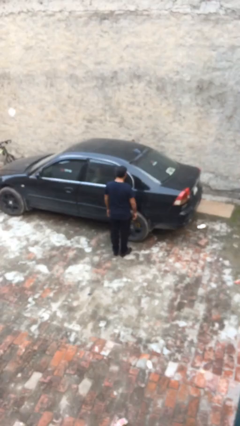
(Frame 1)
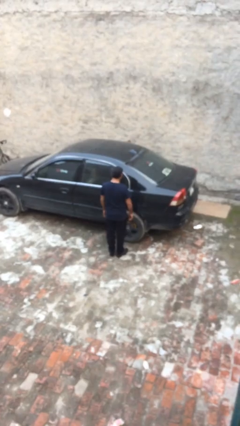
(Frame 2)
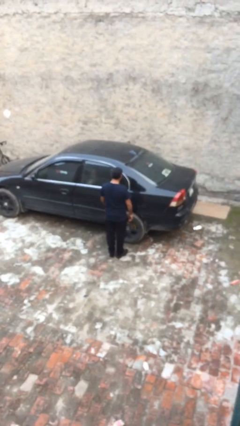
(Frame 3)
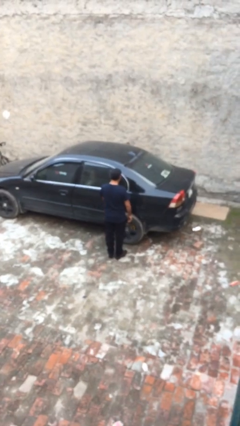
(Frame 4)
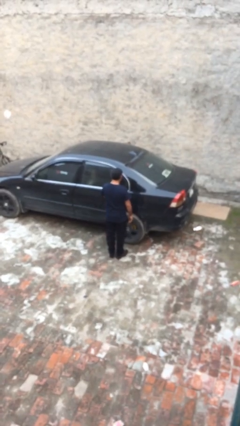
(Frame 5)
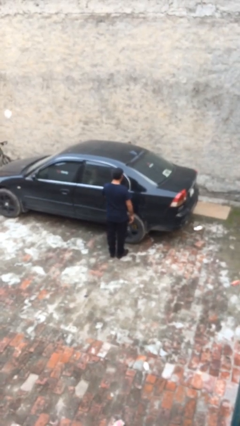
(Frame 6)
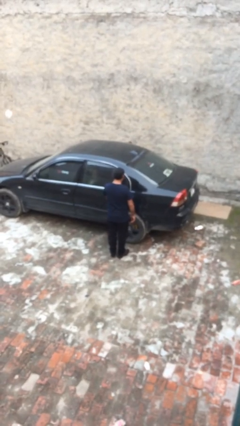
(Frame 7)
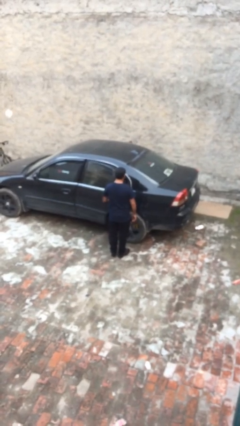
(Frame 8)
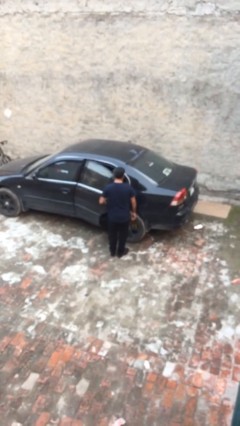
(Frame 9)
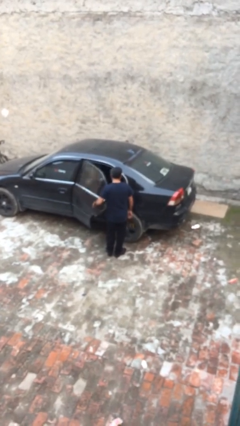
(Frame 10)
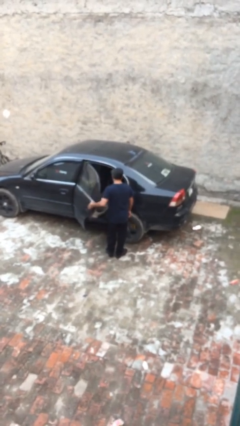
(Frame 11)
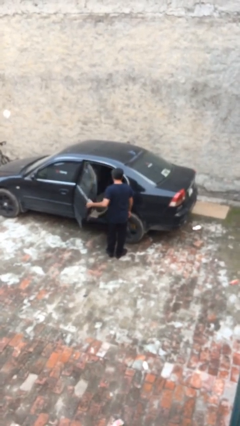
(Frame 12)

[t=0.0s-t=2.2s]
person opens car door

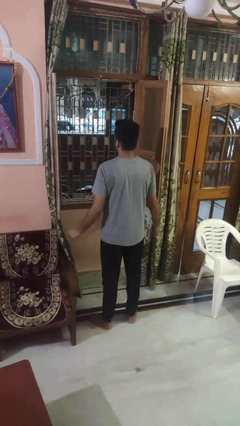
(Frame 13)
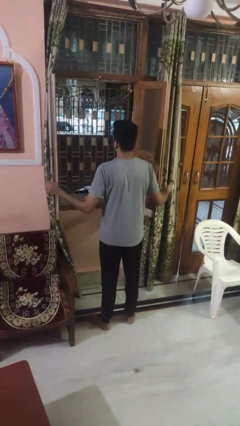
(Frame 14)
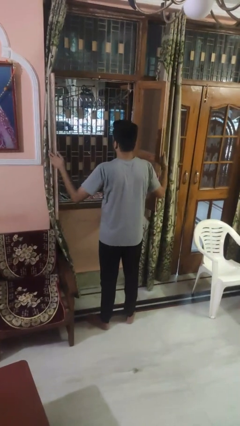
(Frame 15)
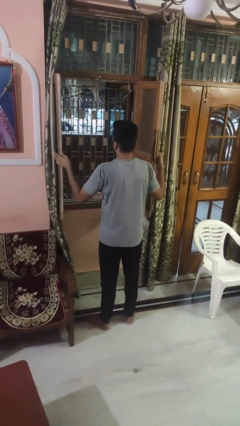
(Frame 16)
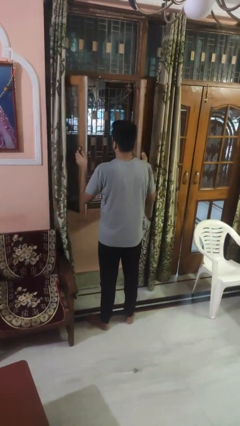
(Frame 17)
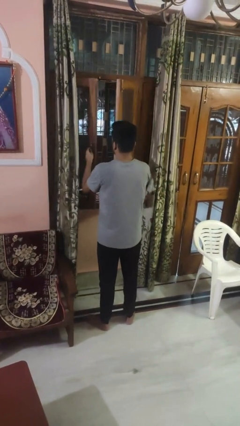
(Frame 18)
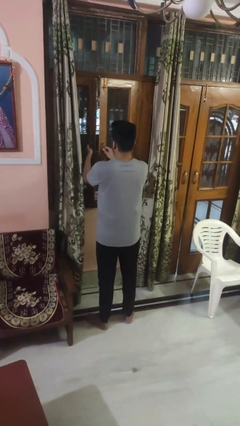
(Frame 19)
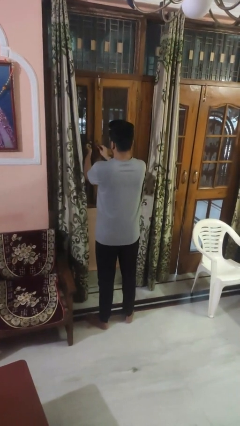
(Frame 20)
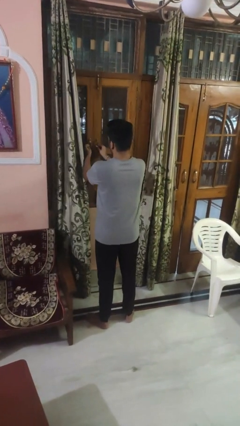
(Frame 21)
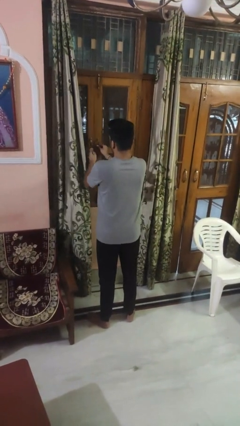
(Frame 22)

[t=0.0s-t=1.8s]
person closes home window

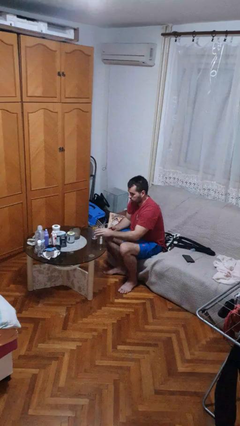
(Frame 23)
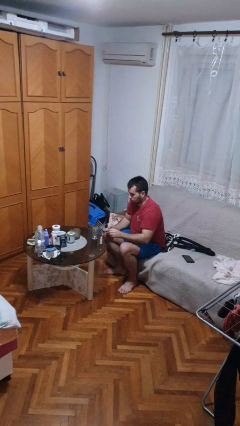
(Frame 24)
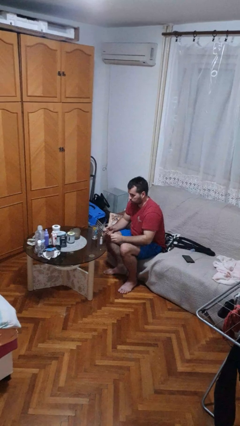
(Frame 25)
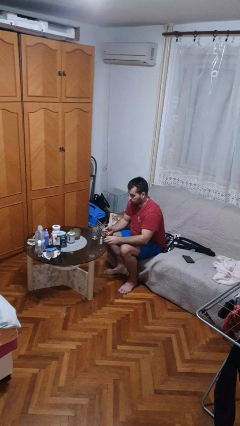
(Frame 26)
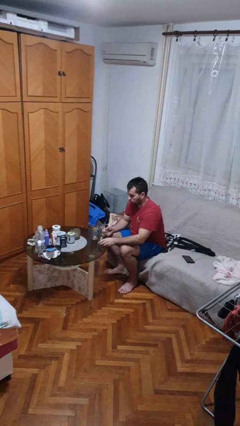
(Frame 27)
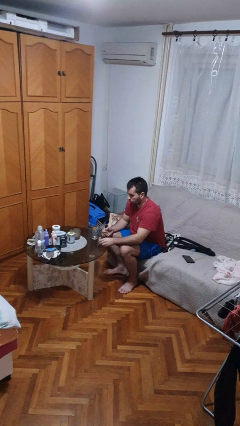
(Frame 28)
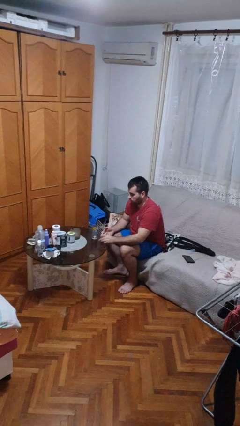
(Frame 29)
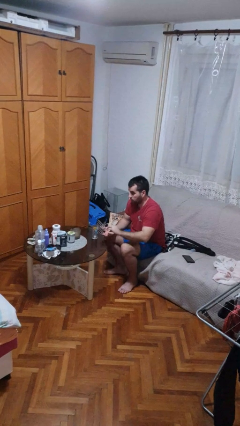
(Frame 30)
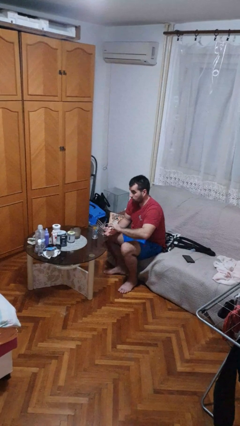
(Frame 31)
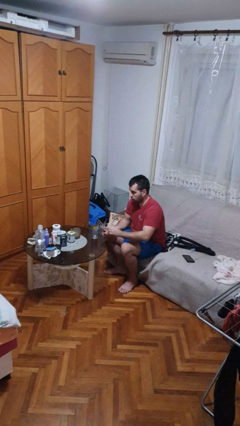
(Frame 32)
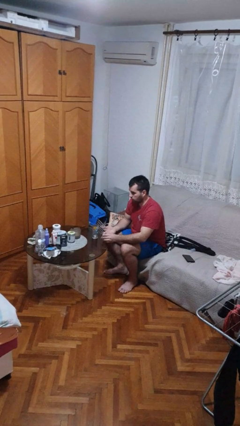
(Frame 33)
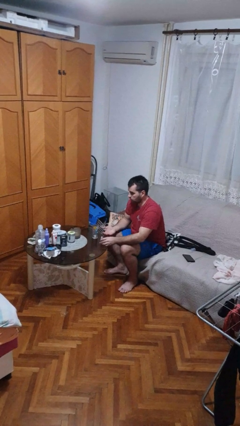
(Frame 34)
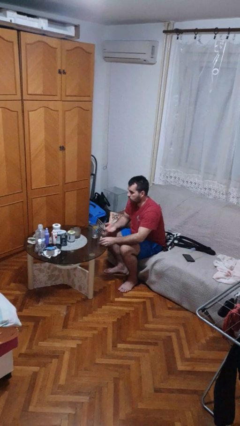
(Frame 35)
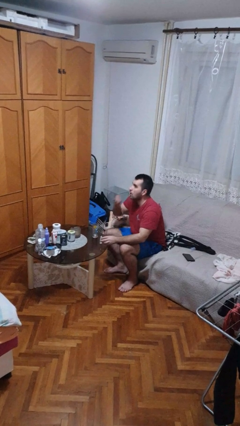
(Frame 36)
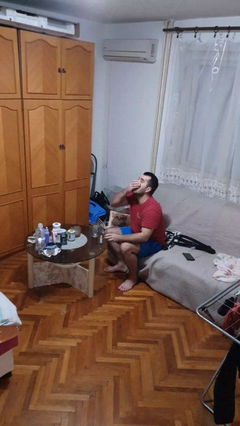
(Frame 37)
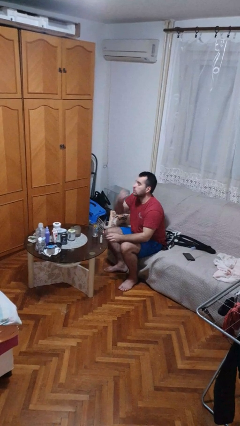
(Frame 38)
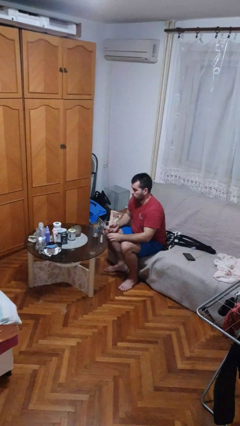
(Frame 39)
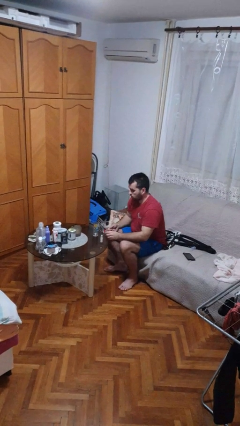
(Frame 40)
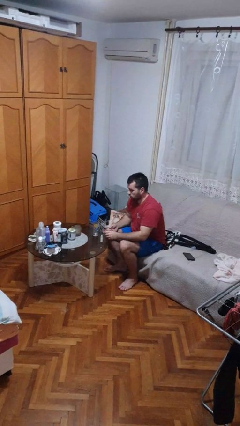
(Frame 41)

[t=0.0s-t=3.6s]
person takes medicine pills

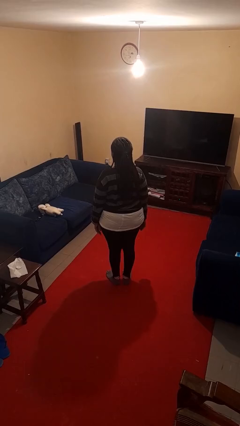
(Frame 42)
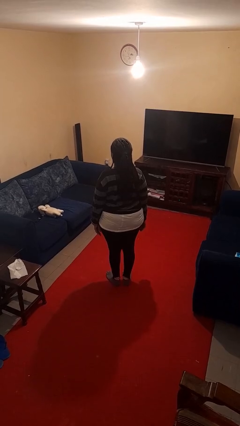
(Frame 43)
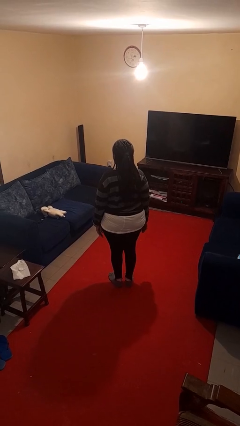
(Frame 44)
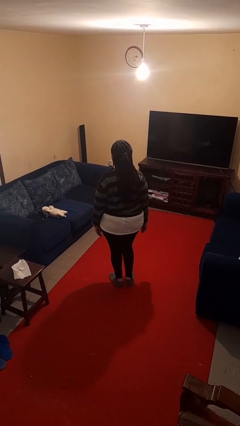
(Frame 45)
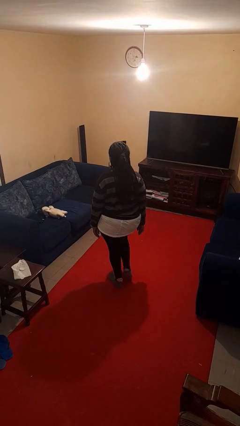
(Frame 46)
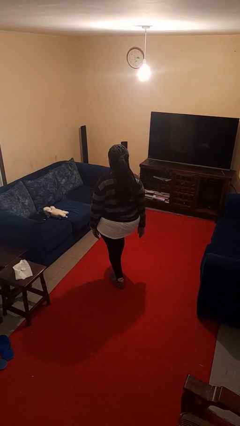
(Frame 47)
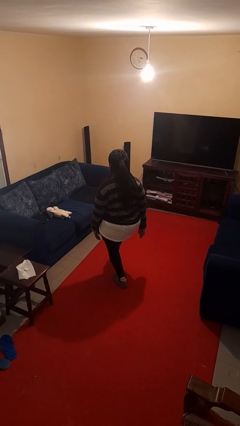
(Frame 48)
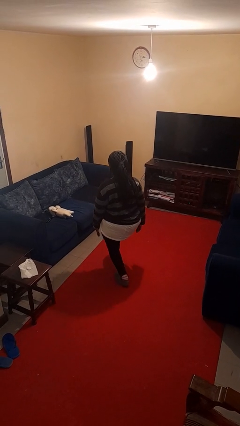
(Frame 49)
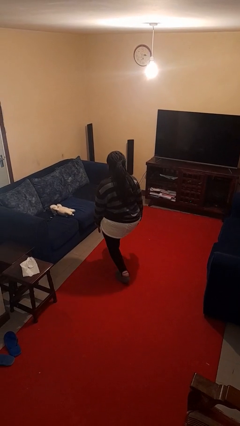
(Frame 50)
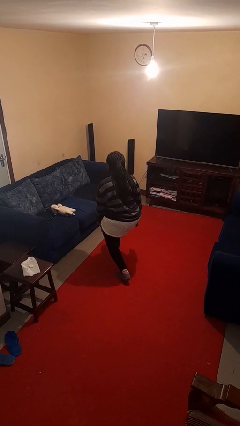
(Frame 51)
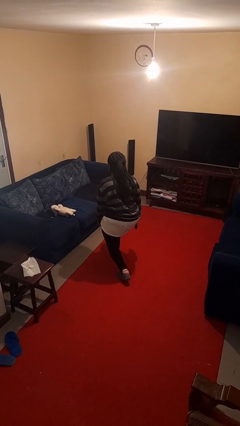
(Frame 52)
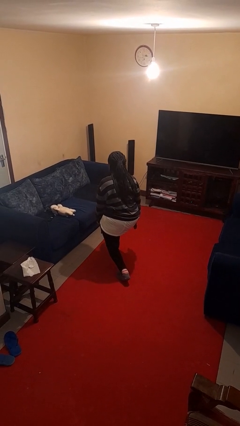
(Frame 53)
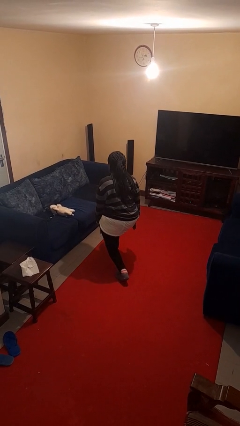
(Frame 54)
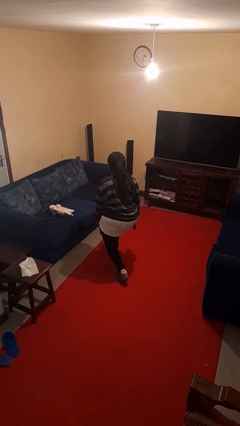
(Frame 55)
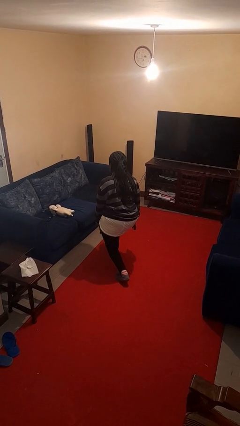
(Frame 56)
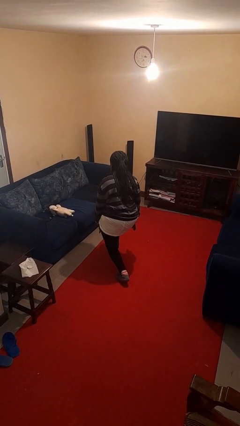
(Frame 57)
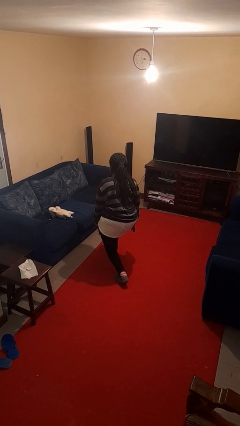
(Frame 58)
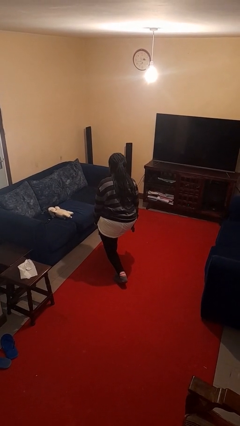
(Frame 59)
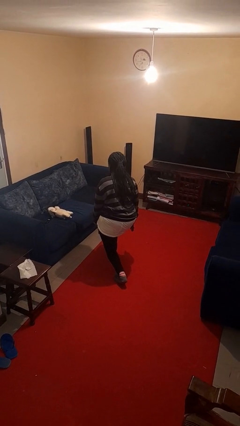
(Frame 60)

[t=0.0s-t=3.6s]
person exercises with lunges

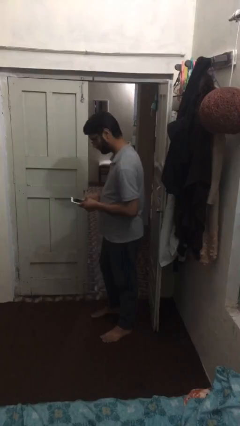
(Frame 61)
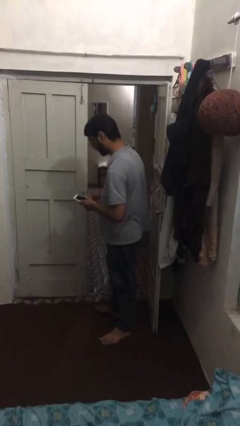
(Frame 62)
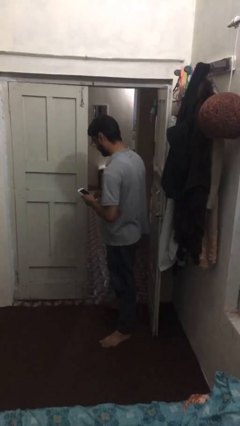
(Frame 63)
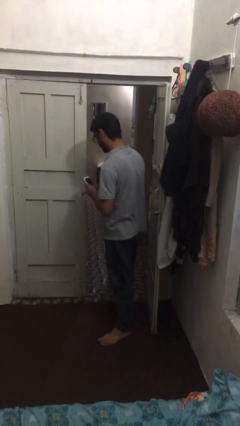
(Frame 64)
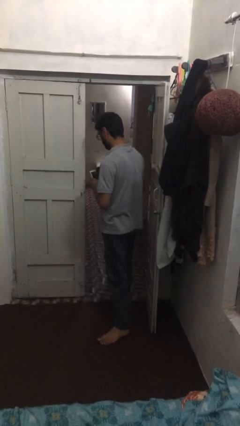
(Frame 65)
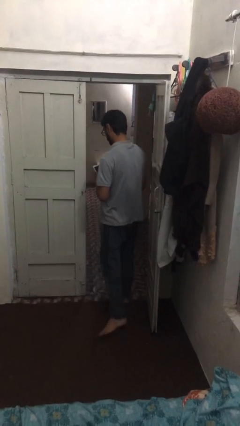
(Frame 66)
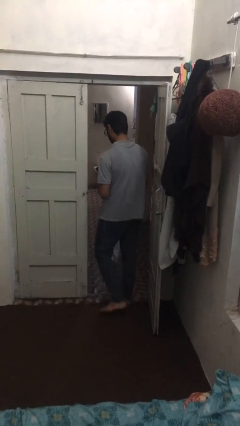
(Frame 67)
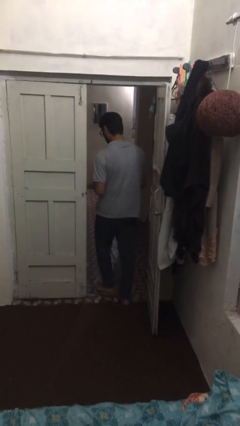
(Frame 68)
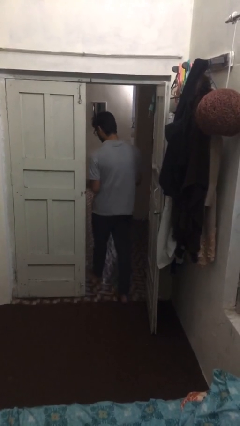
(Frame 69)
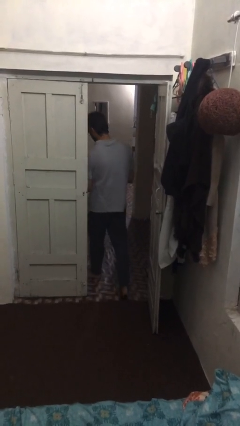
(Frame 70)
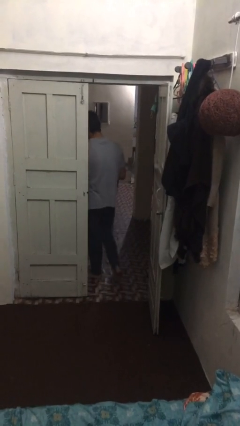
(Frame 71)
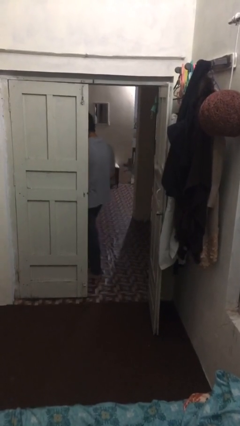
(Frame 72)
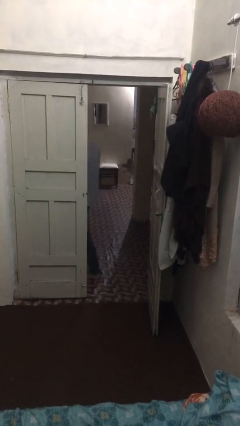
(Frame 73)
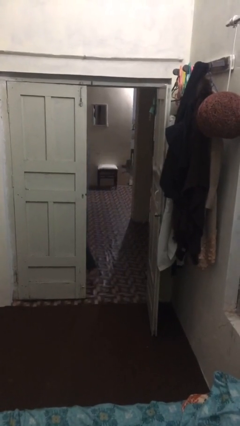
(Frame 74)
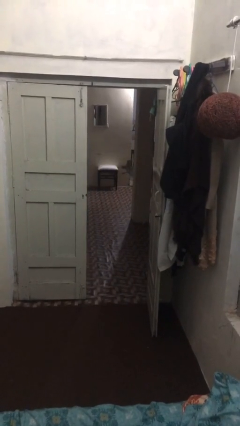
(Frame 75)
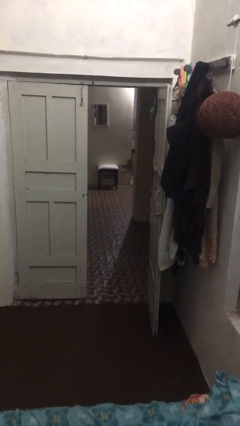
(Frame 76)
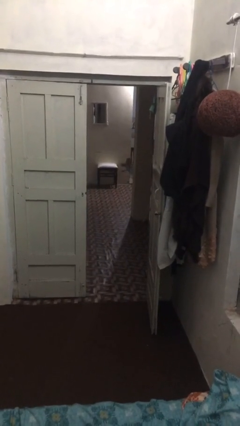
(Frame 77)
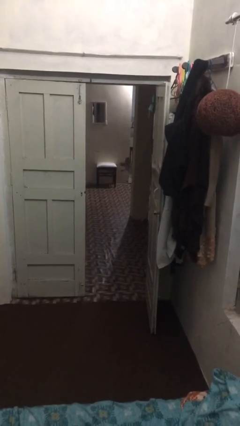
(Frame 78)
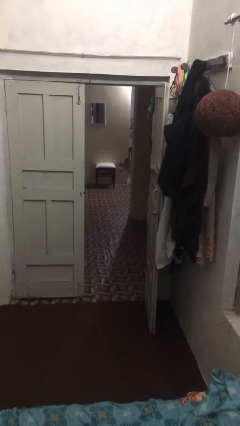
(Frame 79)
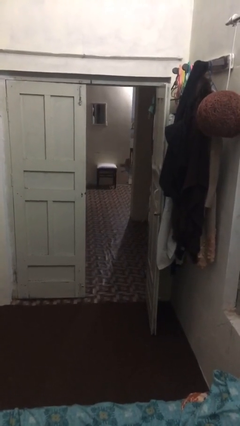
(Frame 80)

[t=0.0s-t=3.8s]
person exits scene through structure

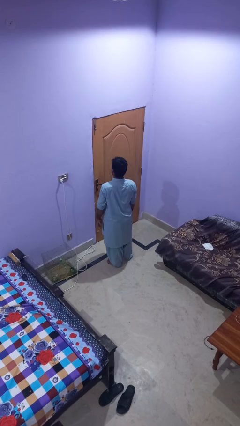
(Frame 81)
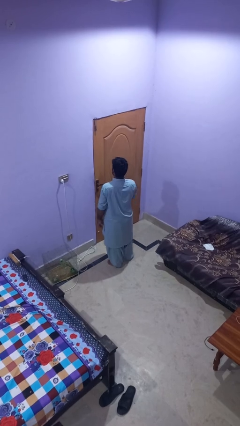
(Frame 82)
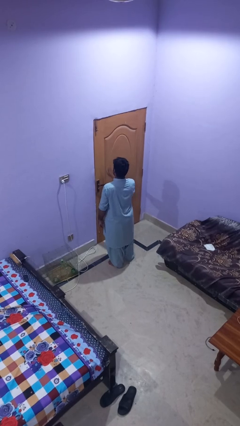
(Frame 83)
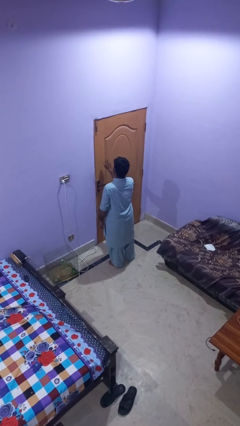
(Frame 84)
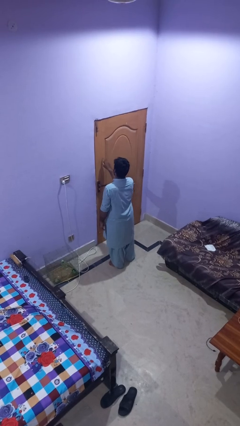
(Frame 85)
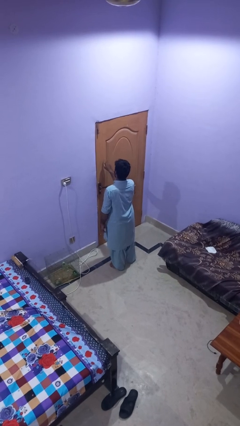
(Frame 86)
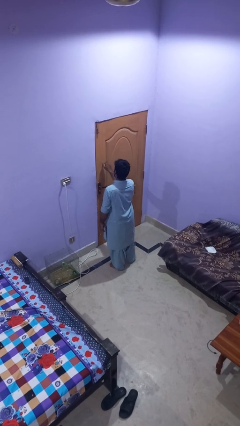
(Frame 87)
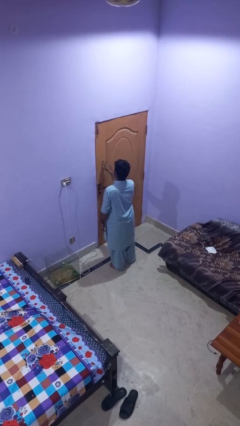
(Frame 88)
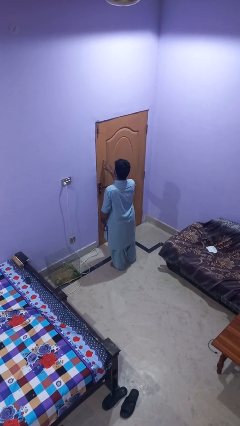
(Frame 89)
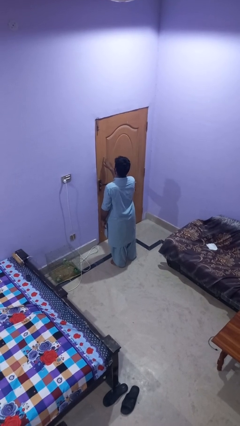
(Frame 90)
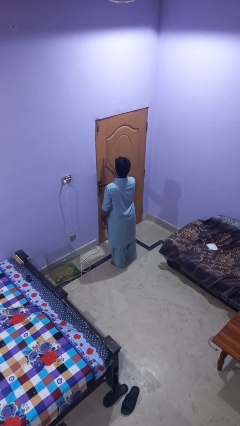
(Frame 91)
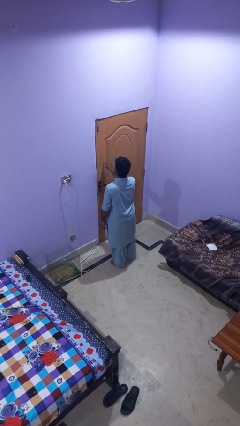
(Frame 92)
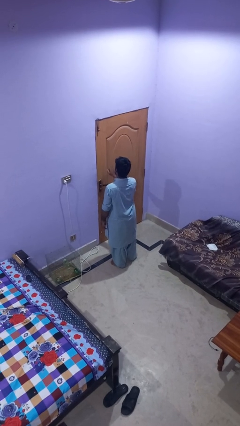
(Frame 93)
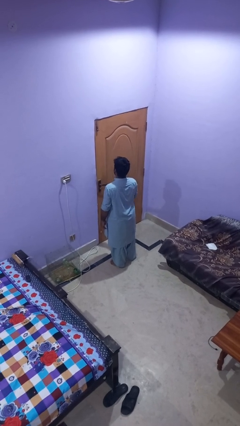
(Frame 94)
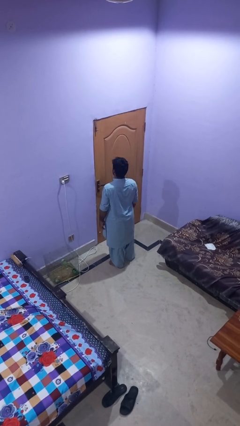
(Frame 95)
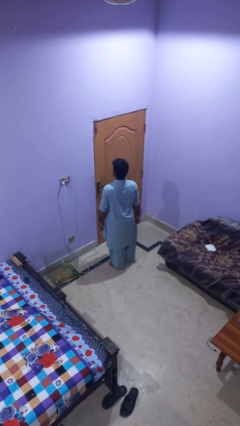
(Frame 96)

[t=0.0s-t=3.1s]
person taps object with finger
